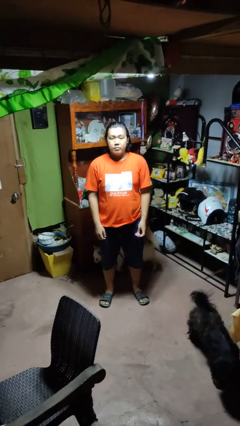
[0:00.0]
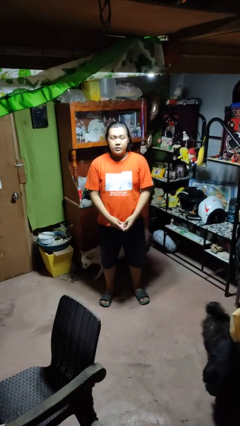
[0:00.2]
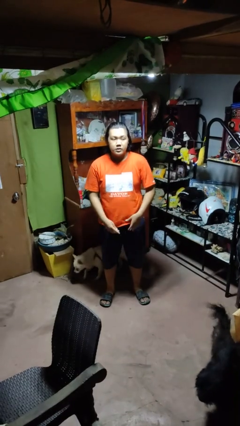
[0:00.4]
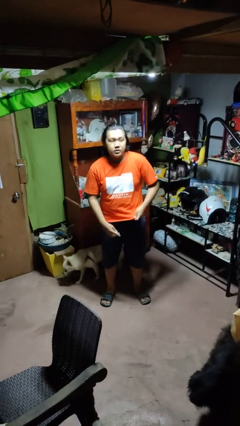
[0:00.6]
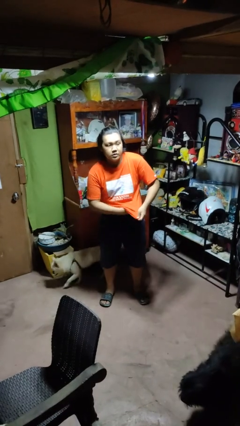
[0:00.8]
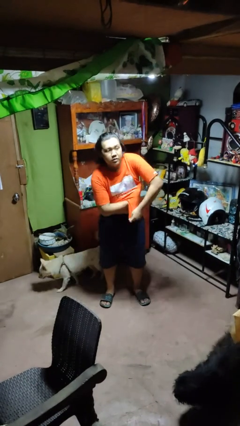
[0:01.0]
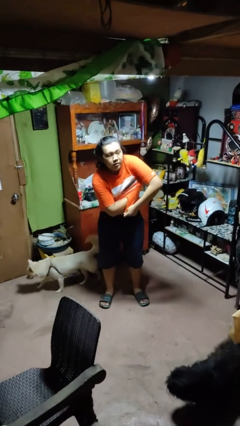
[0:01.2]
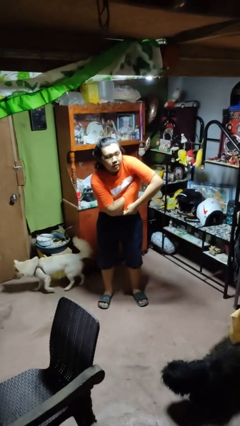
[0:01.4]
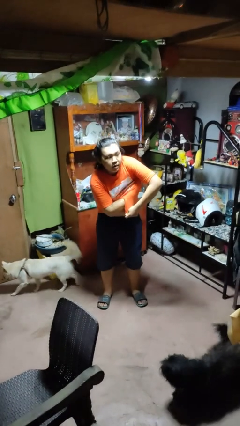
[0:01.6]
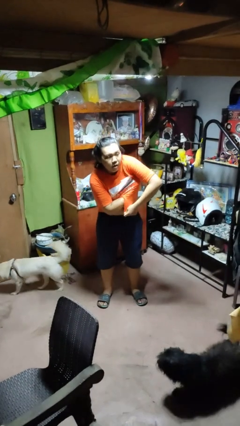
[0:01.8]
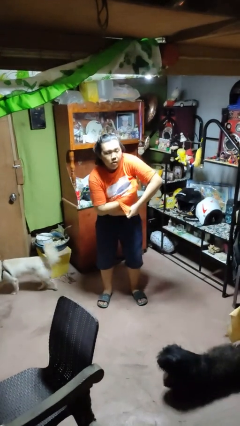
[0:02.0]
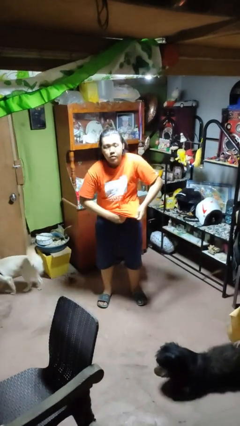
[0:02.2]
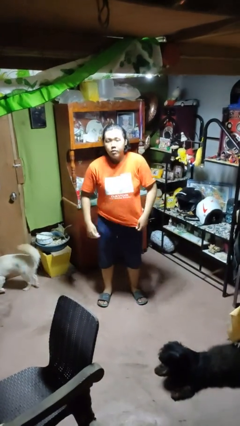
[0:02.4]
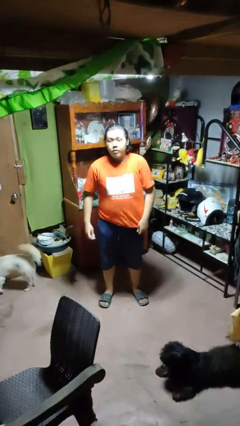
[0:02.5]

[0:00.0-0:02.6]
person applies deodorant

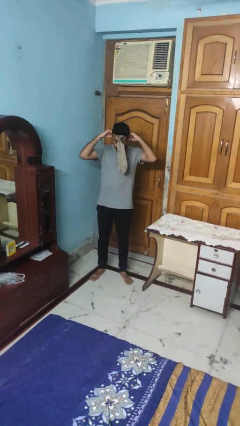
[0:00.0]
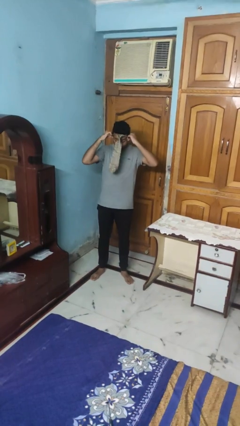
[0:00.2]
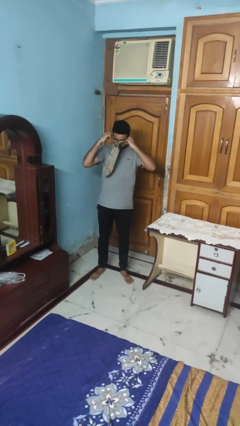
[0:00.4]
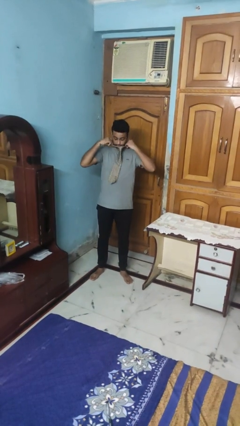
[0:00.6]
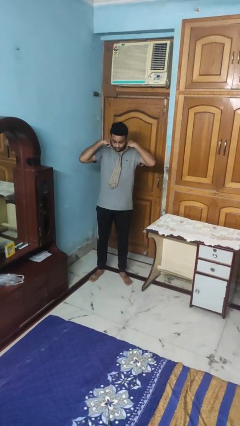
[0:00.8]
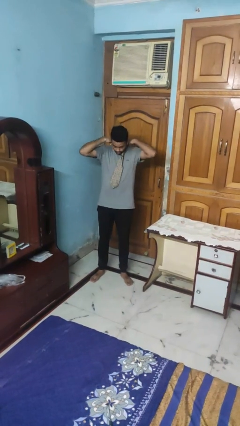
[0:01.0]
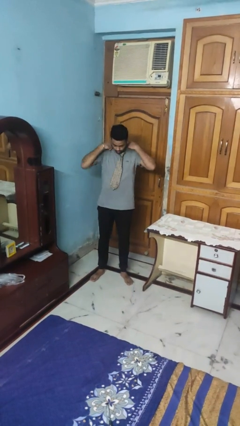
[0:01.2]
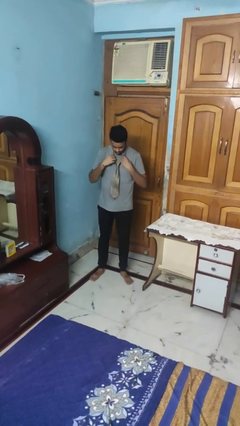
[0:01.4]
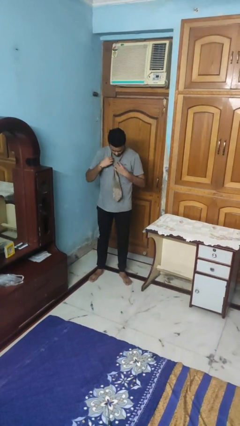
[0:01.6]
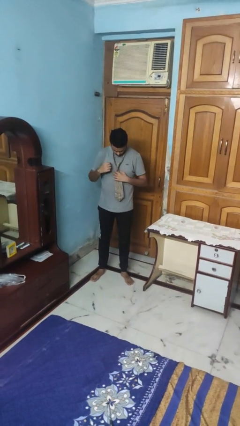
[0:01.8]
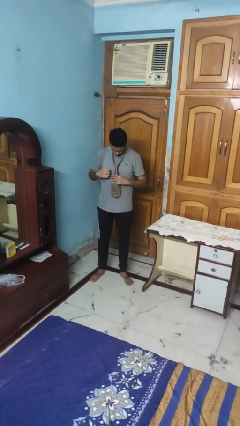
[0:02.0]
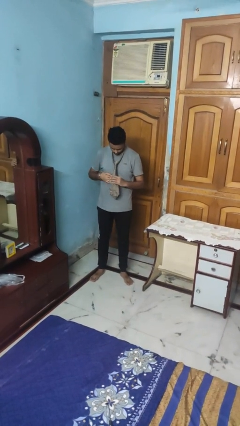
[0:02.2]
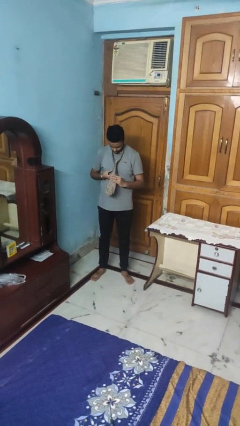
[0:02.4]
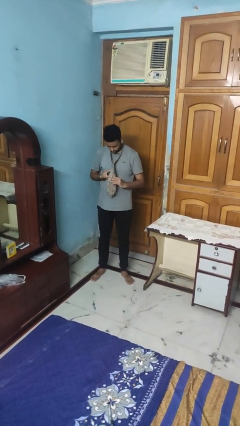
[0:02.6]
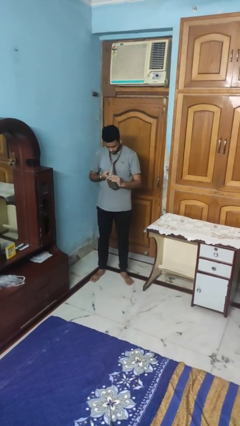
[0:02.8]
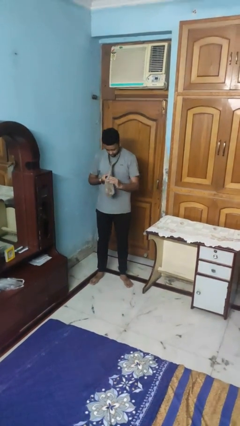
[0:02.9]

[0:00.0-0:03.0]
person puts on necktie

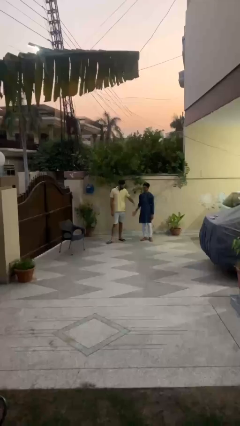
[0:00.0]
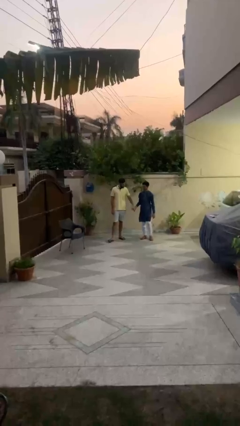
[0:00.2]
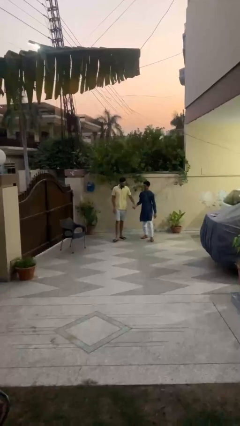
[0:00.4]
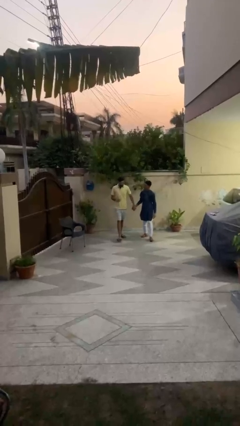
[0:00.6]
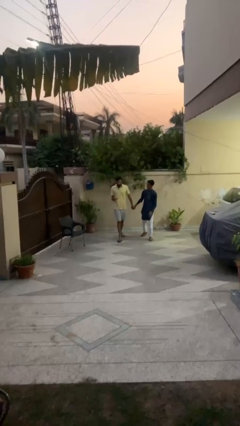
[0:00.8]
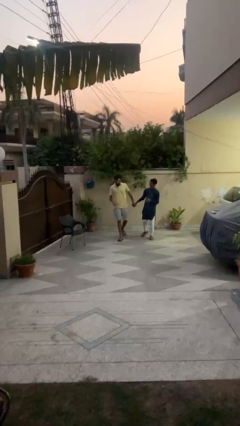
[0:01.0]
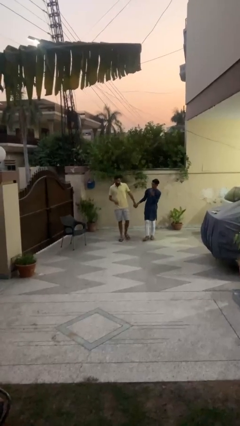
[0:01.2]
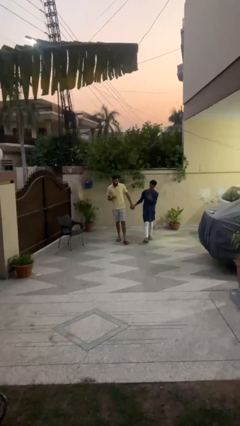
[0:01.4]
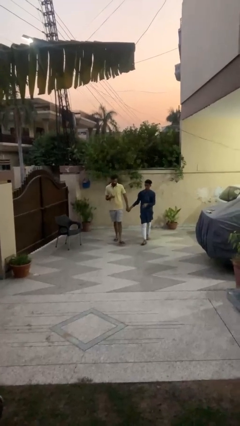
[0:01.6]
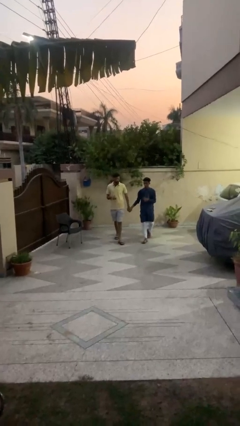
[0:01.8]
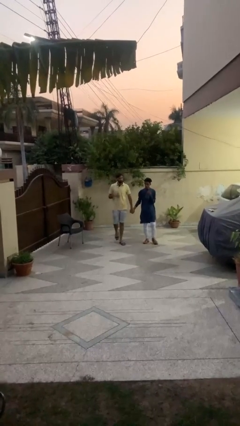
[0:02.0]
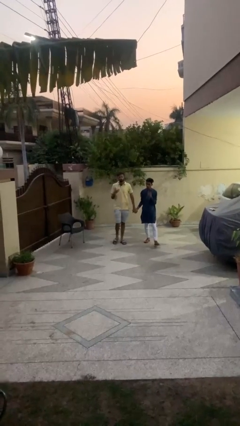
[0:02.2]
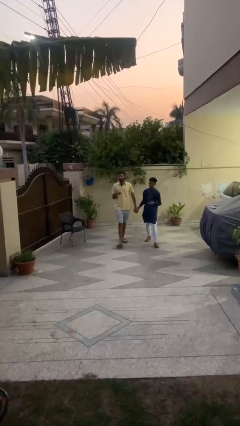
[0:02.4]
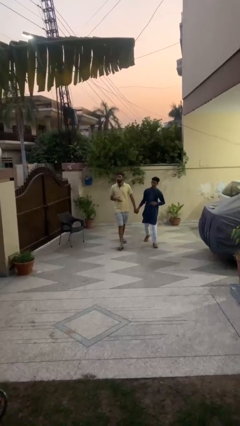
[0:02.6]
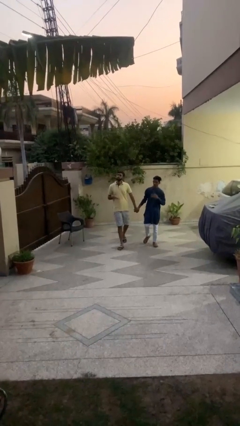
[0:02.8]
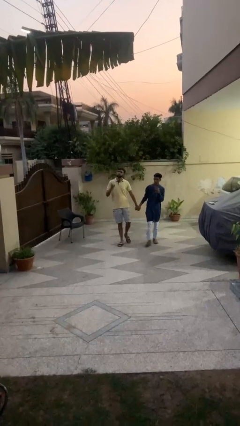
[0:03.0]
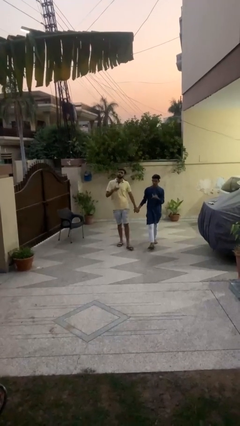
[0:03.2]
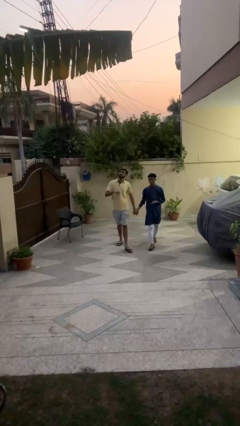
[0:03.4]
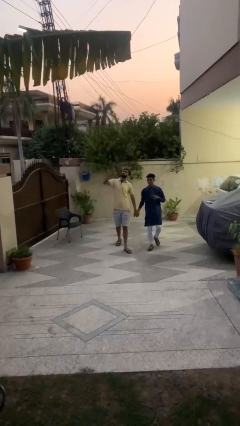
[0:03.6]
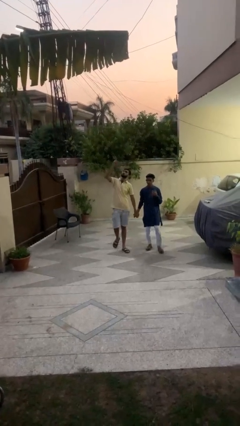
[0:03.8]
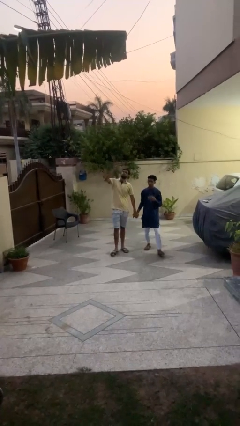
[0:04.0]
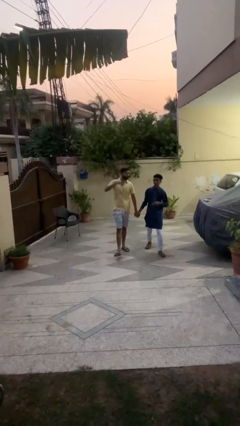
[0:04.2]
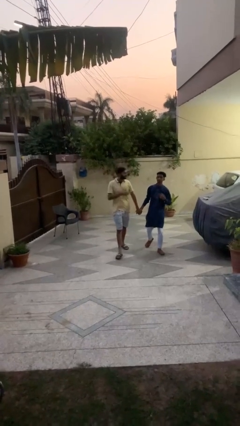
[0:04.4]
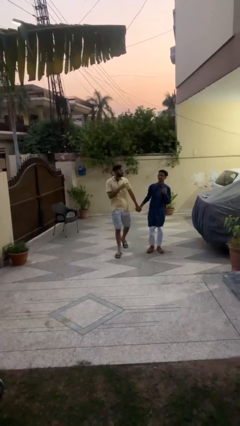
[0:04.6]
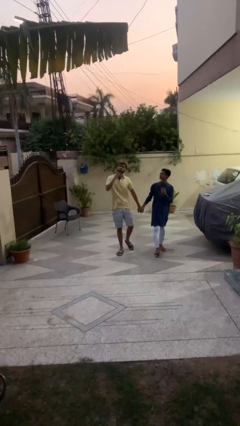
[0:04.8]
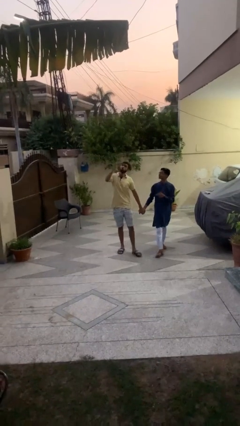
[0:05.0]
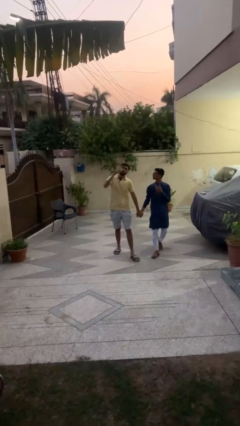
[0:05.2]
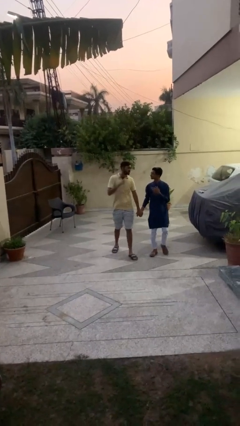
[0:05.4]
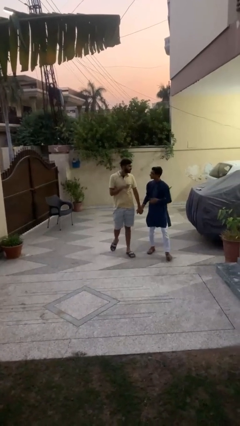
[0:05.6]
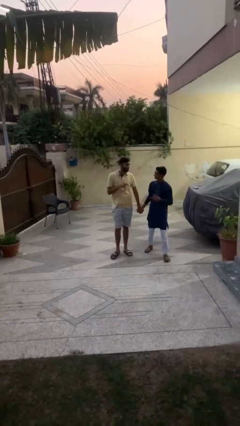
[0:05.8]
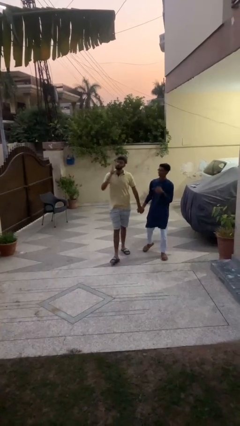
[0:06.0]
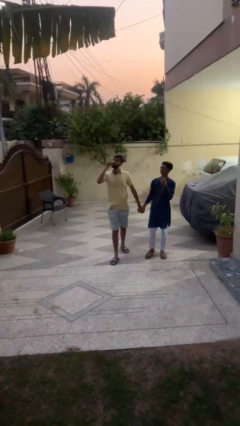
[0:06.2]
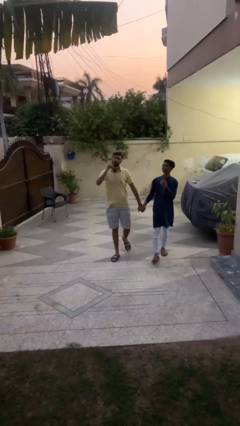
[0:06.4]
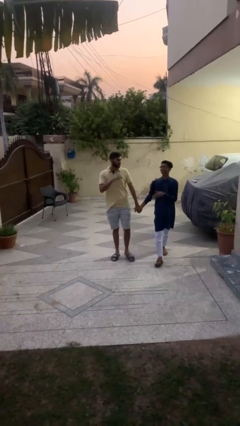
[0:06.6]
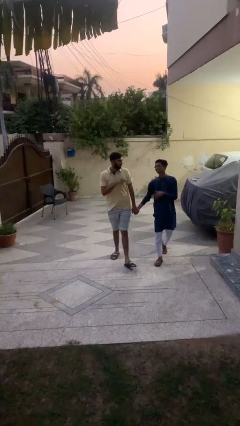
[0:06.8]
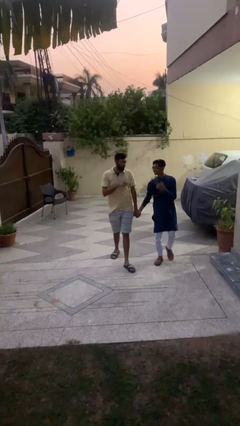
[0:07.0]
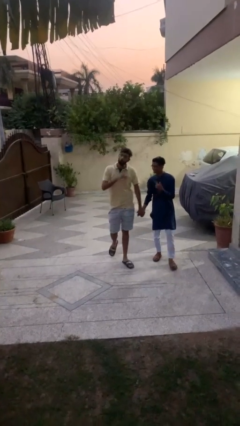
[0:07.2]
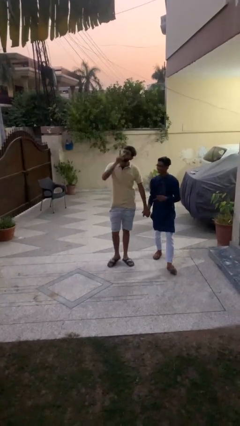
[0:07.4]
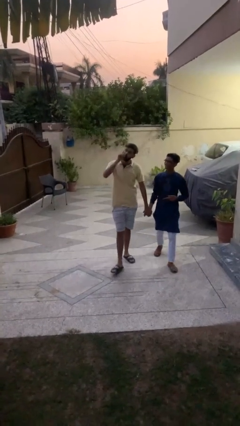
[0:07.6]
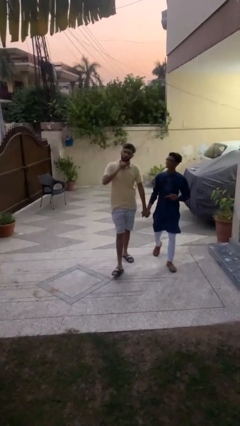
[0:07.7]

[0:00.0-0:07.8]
person holds hand

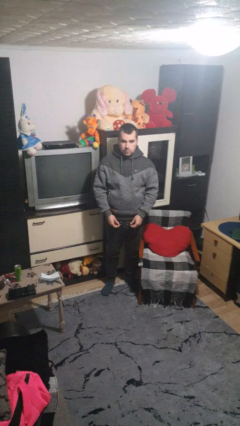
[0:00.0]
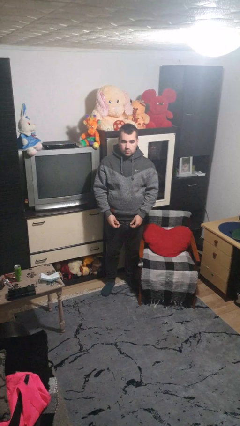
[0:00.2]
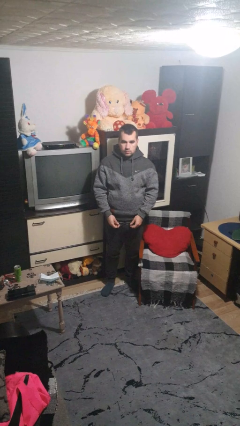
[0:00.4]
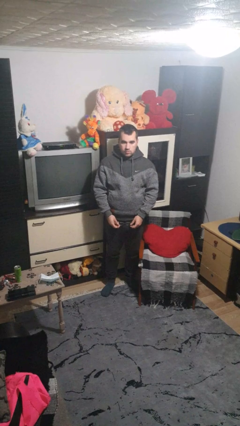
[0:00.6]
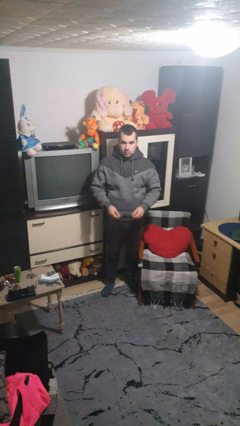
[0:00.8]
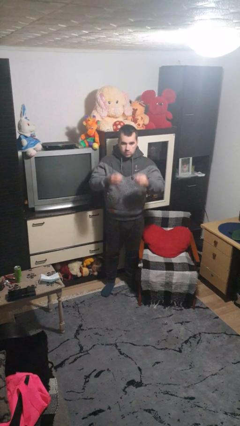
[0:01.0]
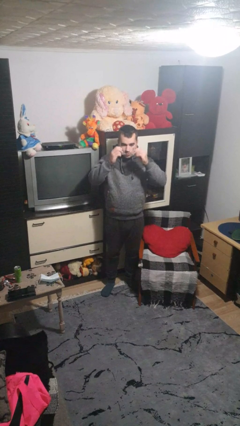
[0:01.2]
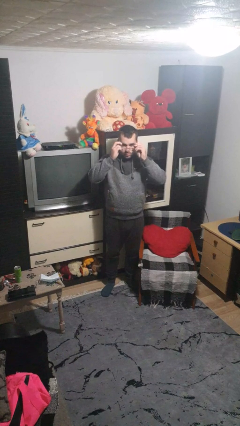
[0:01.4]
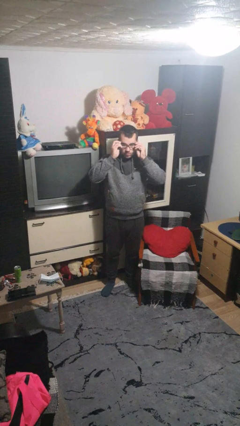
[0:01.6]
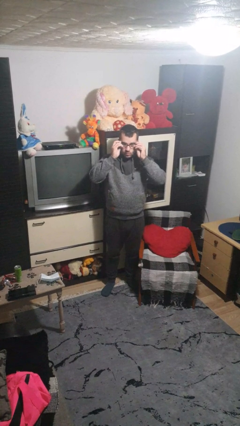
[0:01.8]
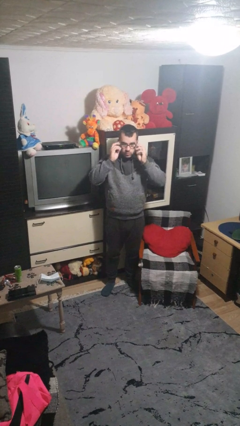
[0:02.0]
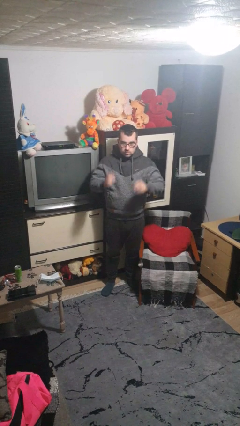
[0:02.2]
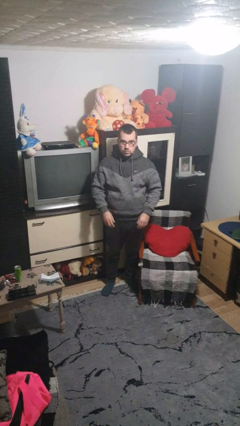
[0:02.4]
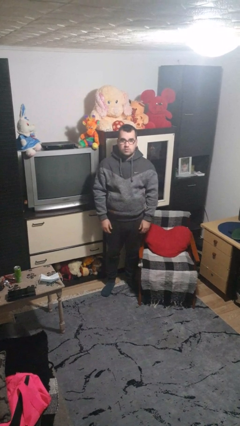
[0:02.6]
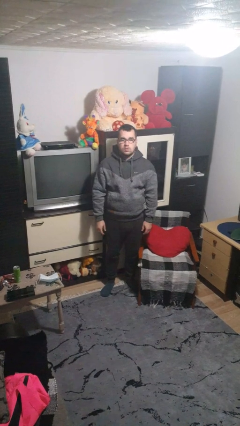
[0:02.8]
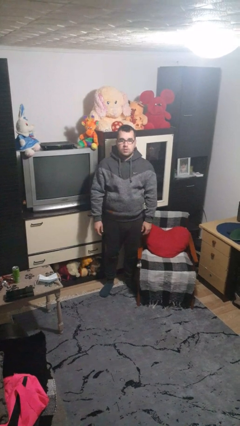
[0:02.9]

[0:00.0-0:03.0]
person puts on glasses

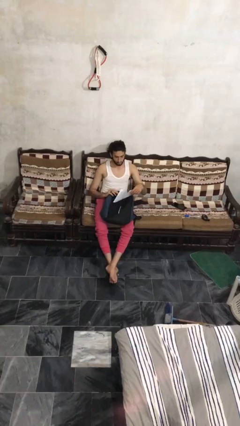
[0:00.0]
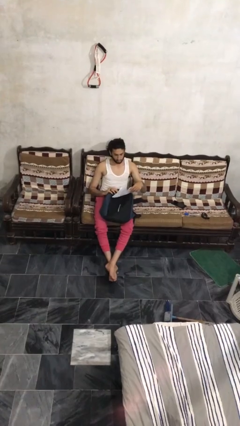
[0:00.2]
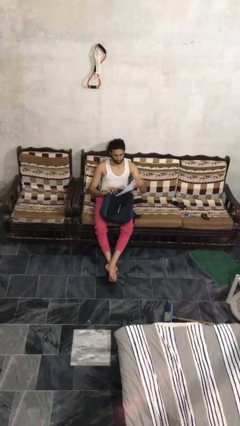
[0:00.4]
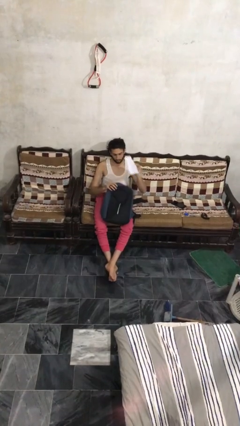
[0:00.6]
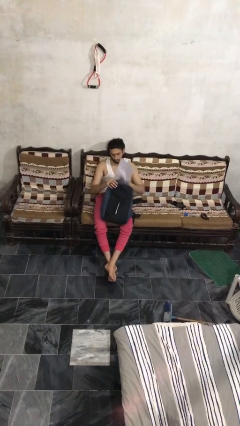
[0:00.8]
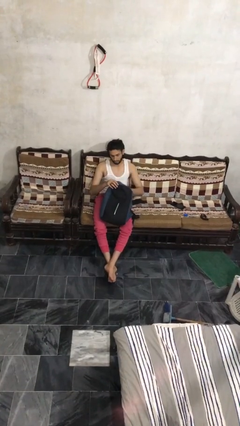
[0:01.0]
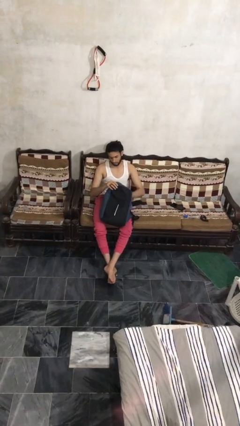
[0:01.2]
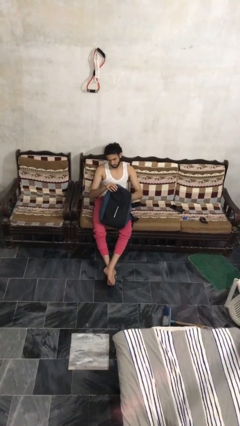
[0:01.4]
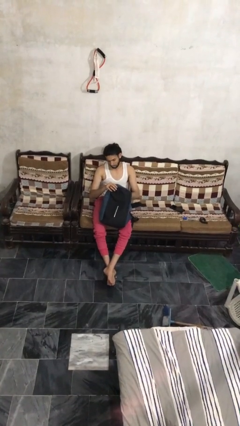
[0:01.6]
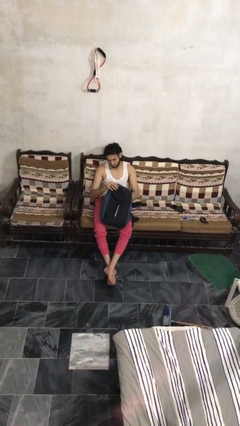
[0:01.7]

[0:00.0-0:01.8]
person puts object into backpack
